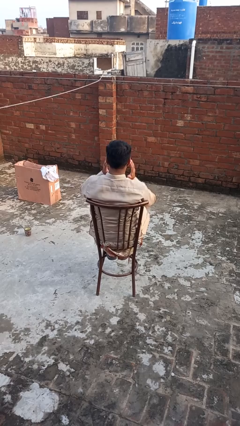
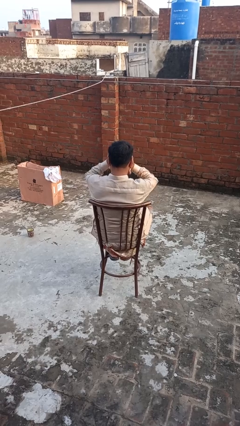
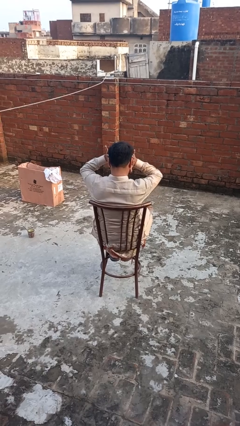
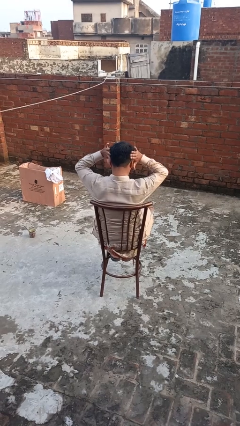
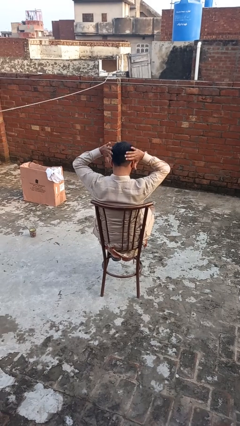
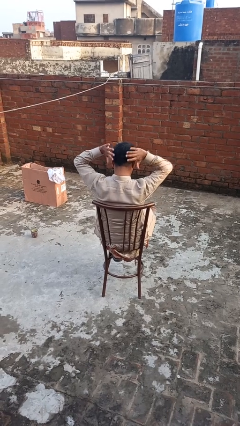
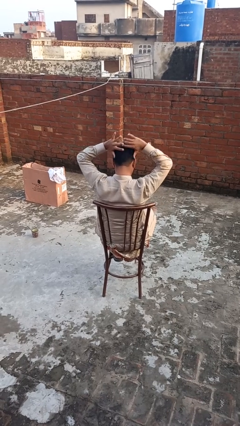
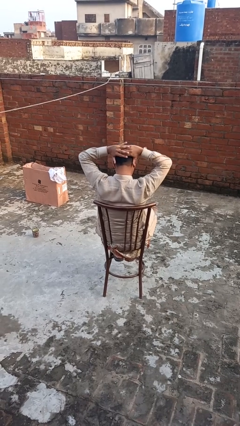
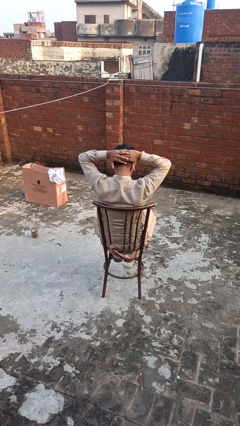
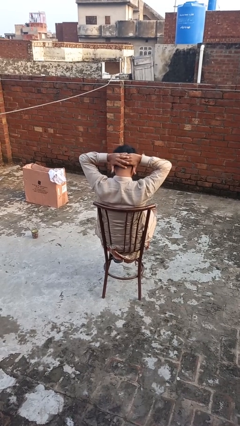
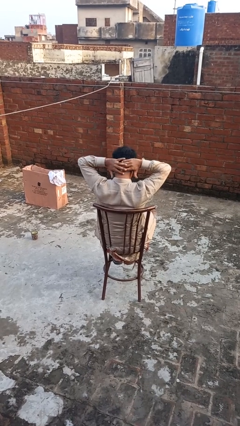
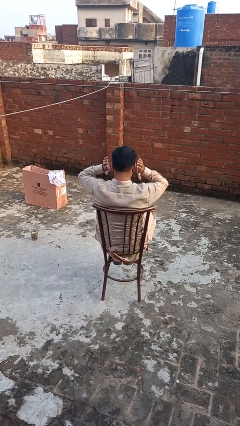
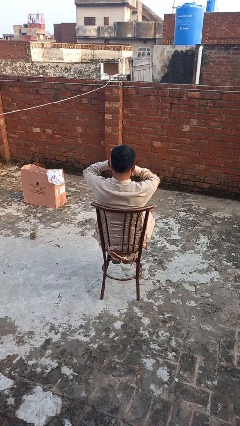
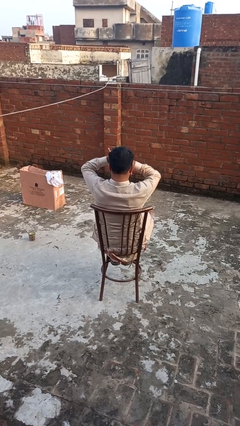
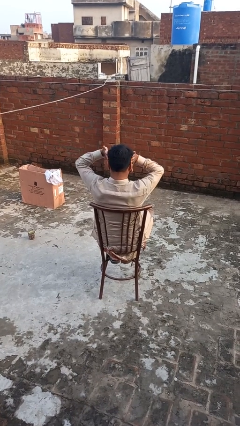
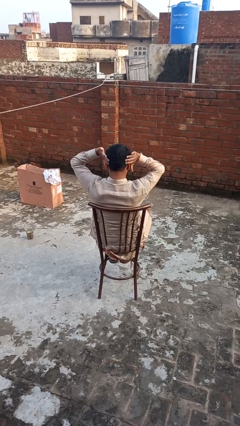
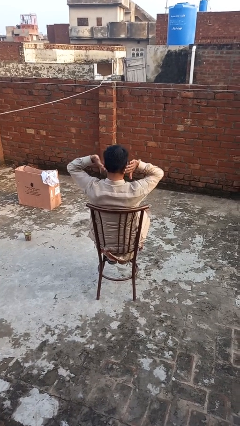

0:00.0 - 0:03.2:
person strokes hair

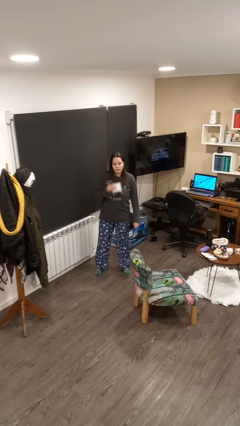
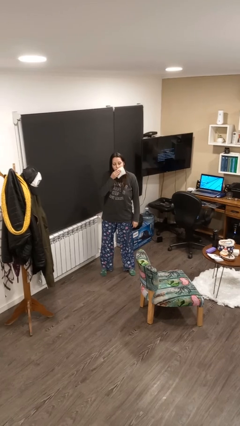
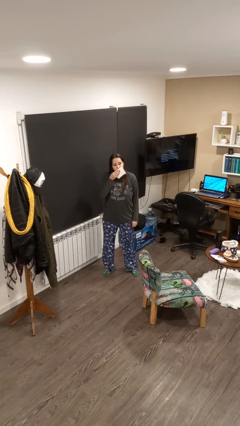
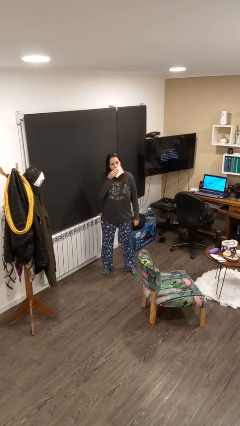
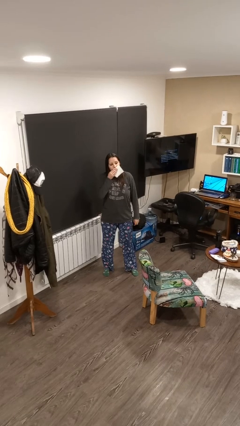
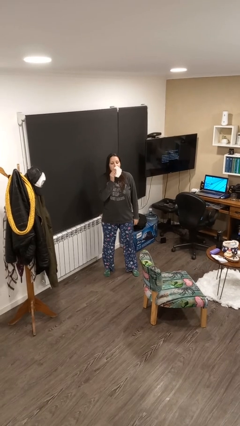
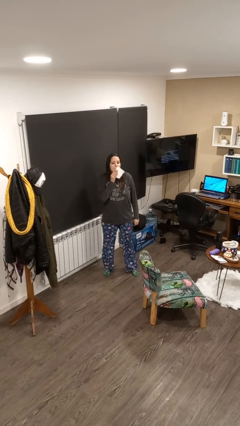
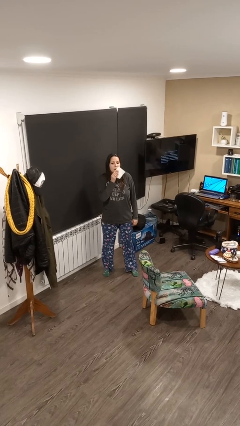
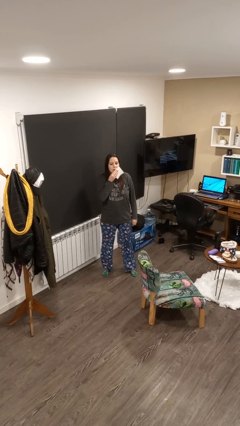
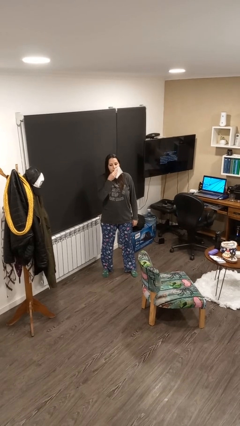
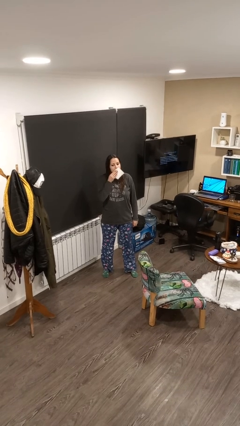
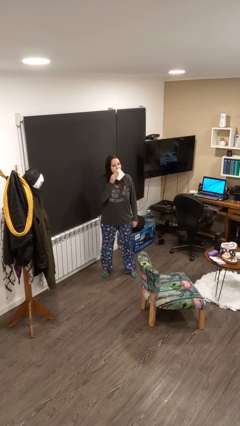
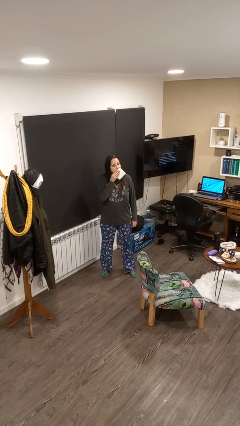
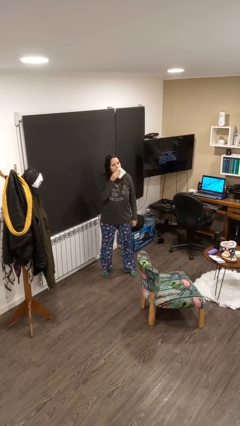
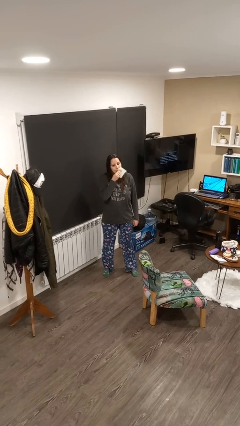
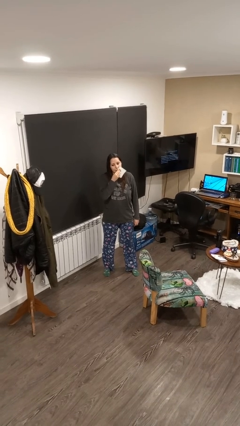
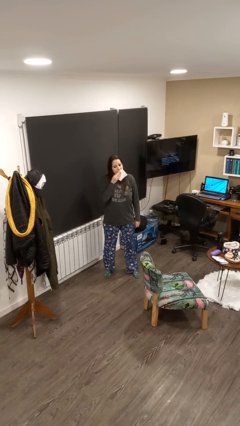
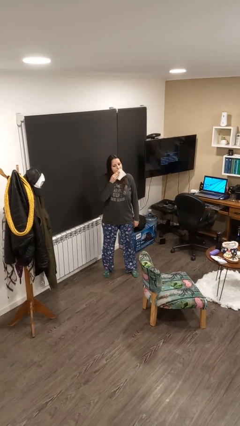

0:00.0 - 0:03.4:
person wipes mouth with napkin

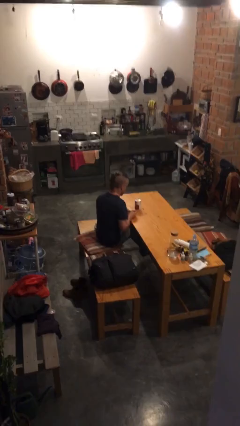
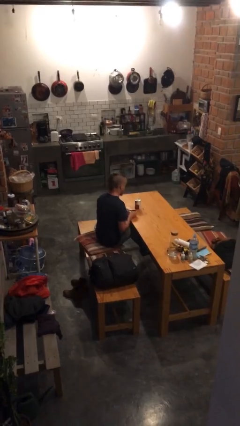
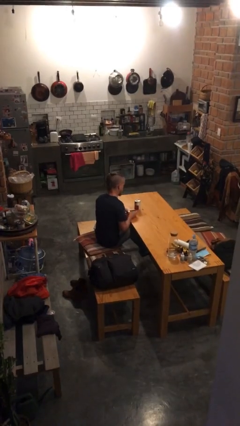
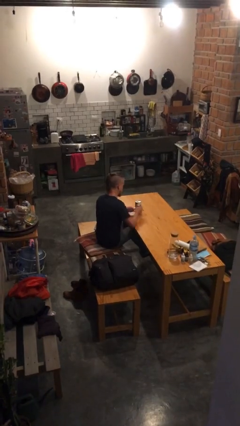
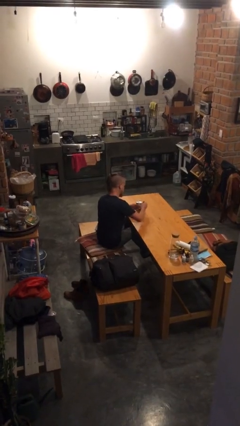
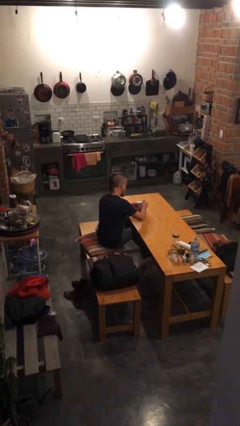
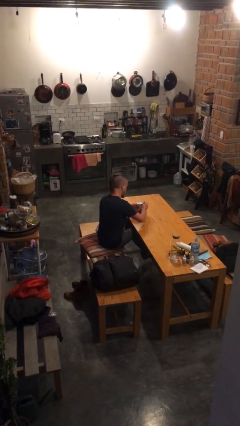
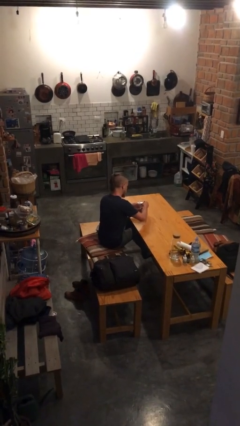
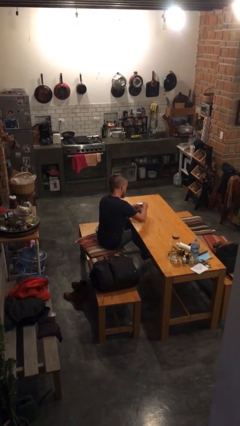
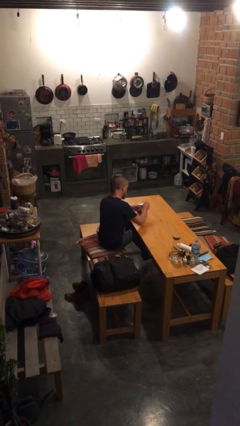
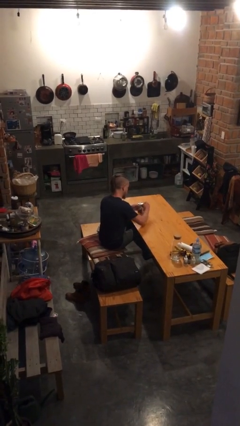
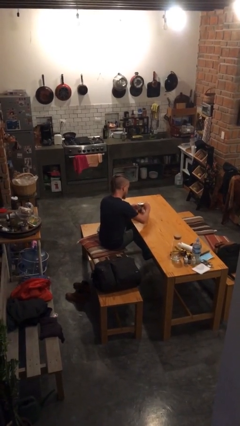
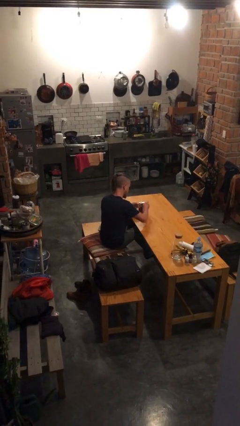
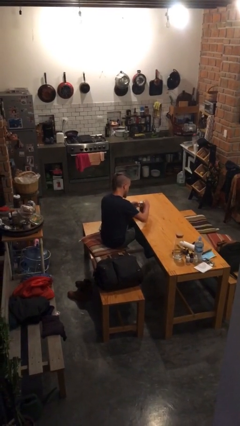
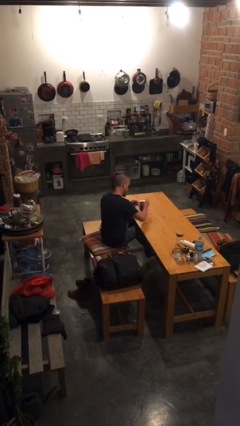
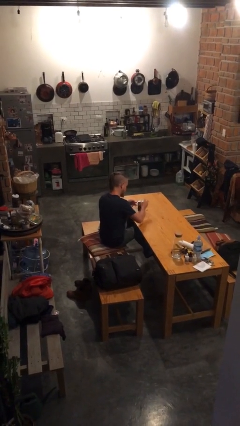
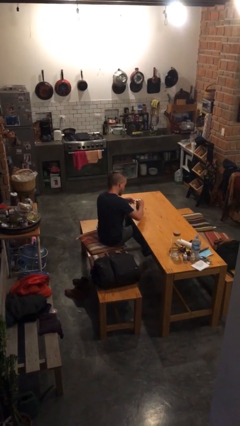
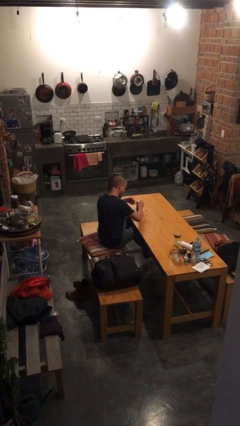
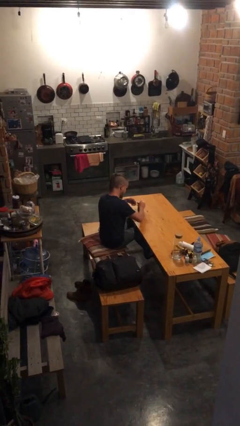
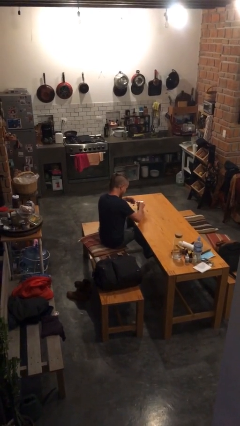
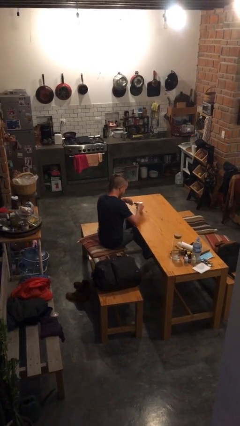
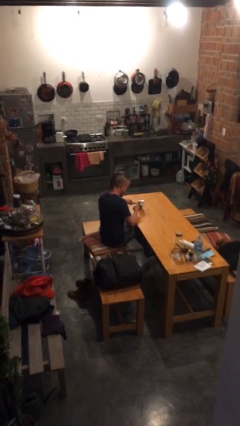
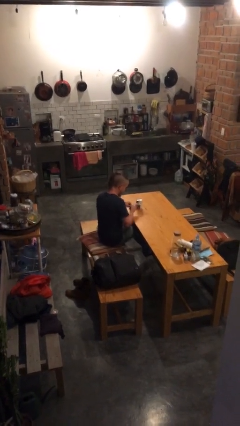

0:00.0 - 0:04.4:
person opens can with can opener

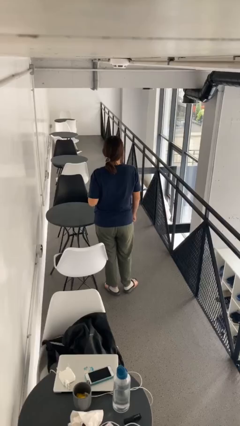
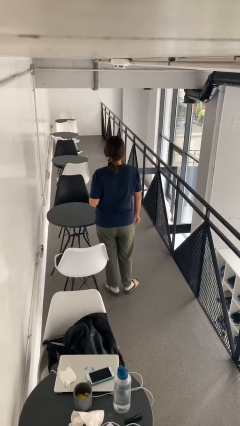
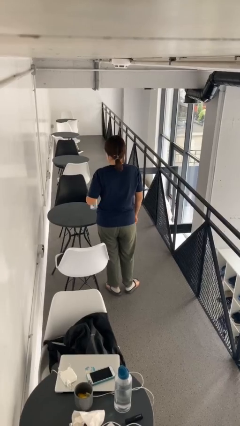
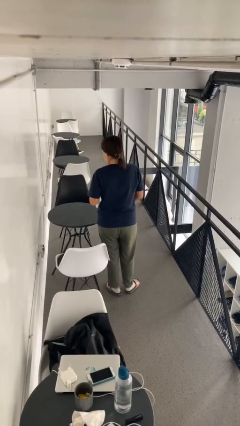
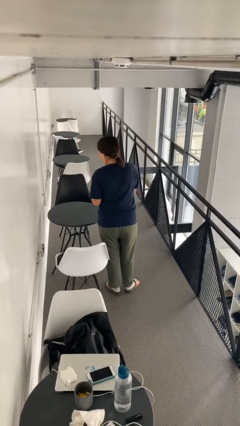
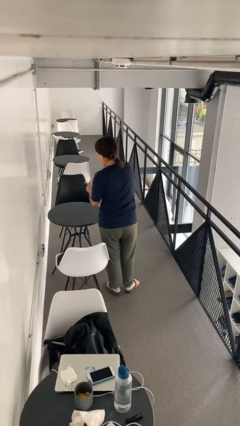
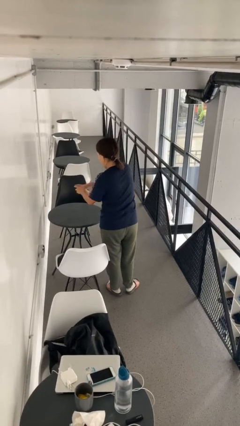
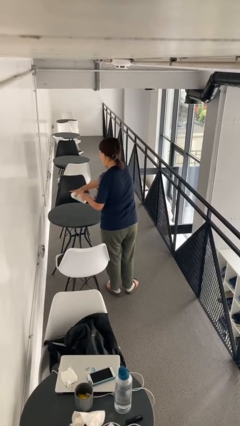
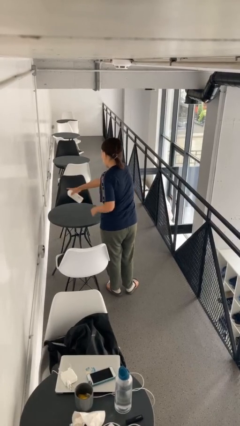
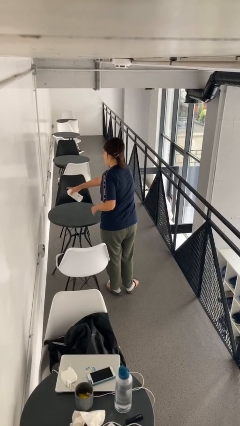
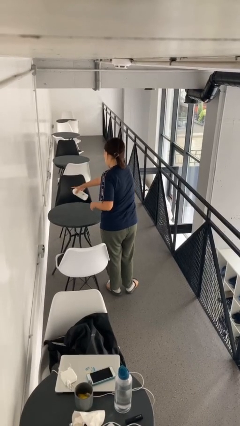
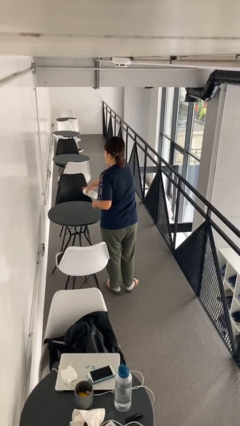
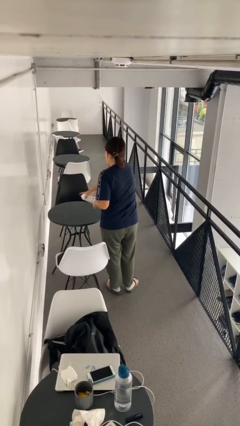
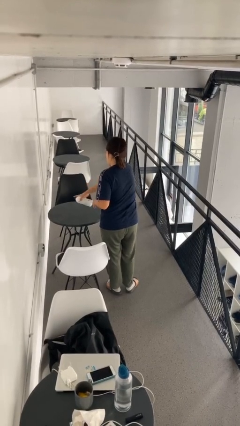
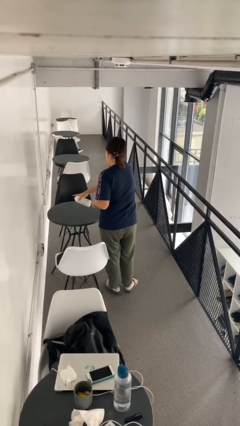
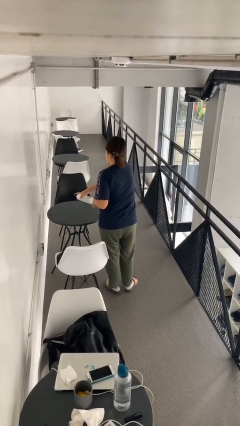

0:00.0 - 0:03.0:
person sprays from bottle

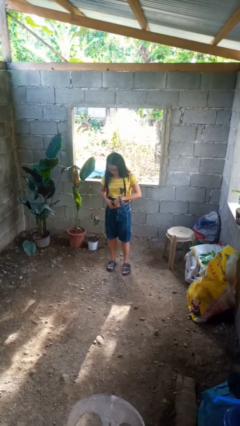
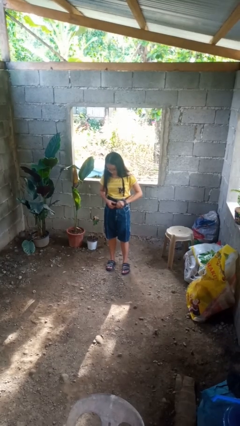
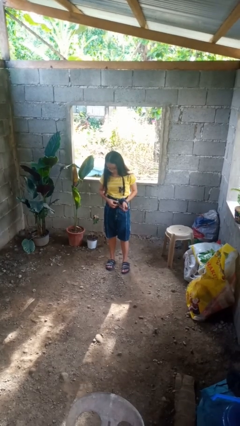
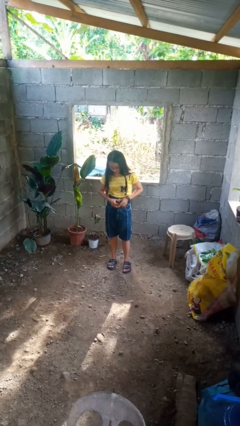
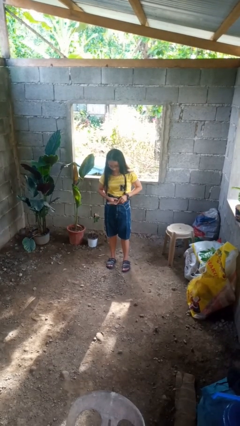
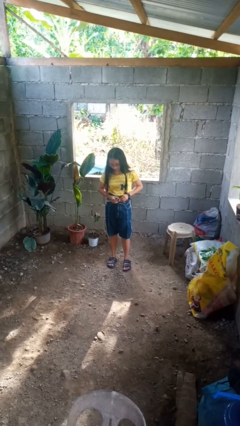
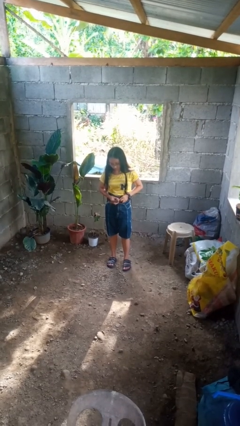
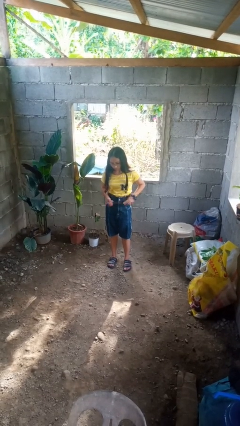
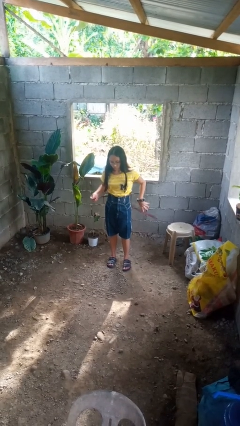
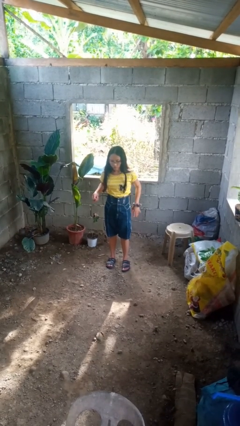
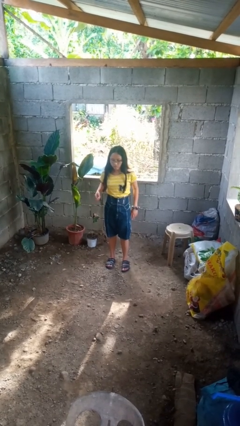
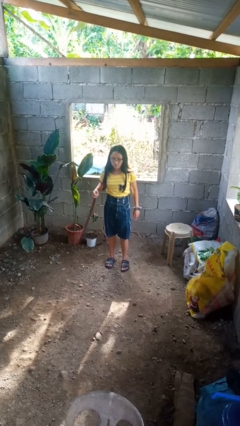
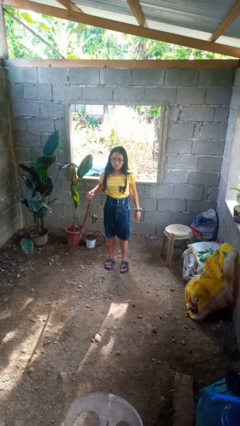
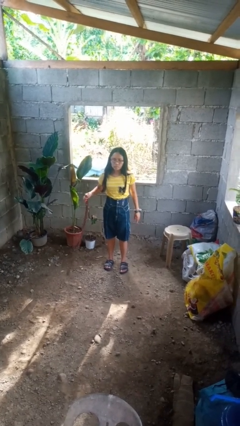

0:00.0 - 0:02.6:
person takes off belt

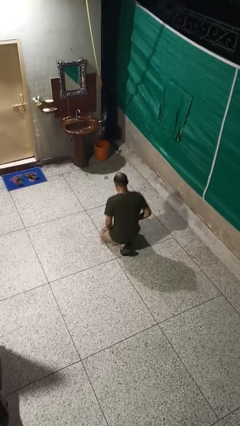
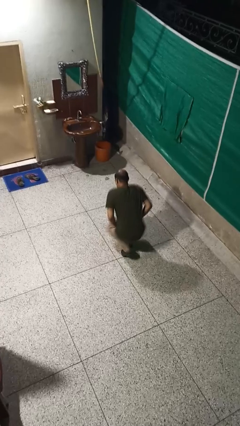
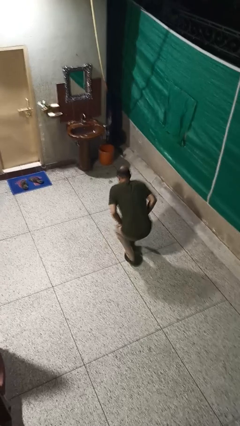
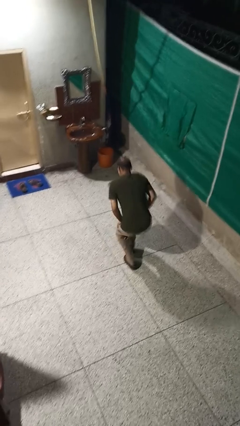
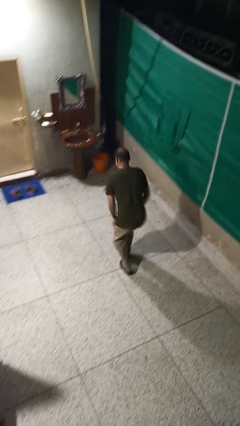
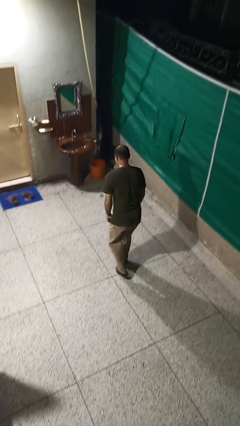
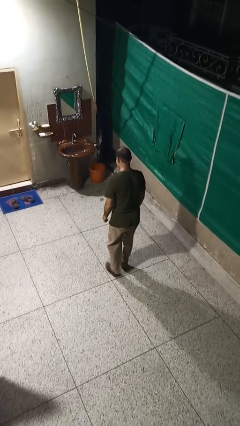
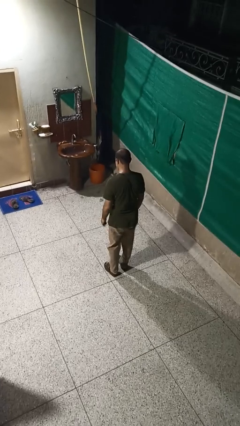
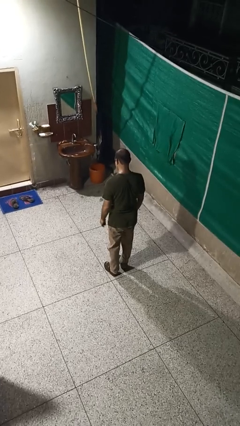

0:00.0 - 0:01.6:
person stands up from floor
